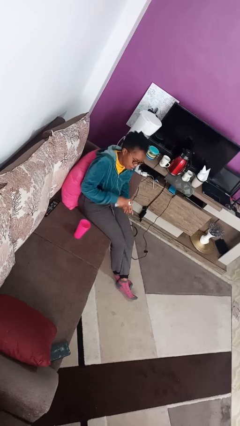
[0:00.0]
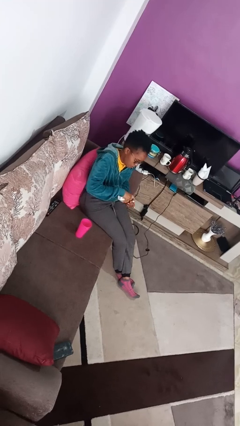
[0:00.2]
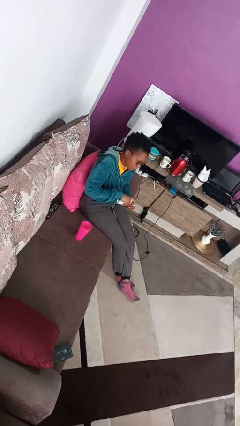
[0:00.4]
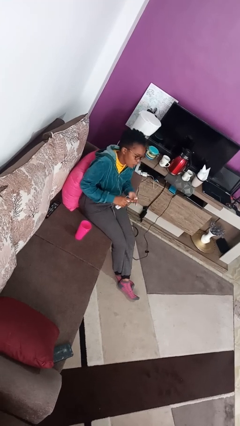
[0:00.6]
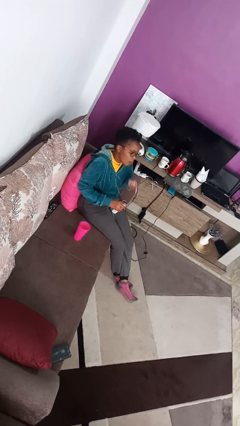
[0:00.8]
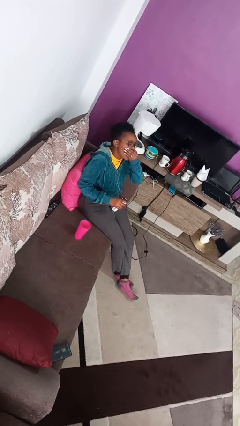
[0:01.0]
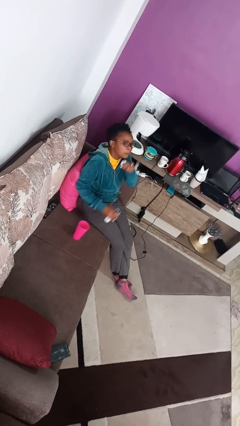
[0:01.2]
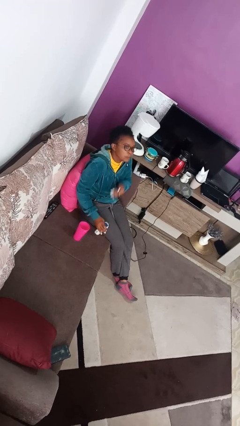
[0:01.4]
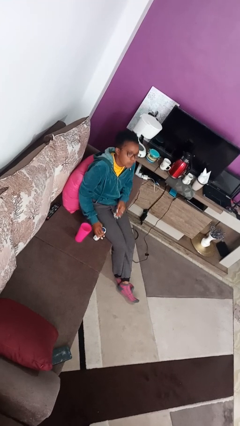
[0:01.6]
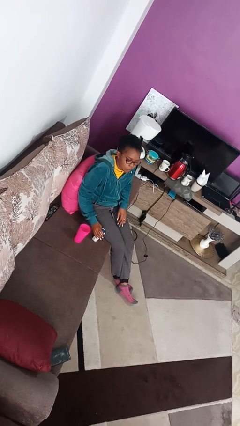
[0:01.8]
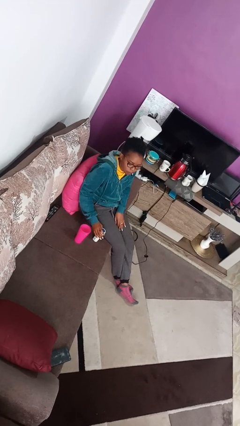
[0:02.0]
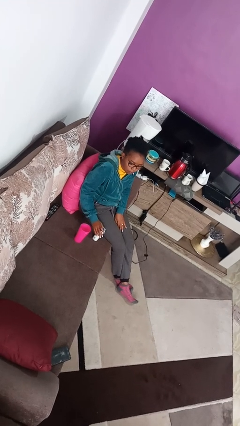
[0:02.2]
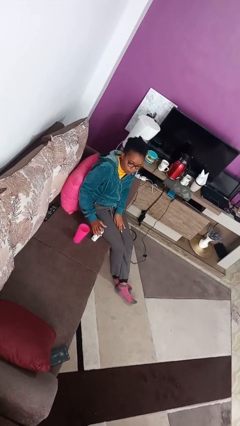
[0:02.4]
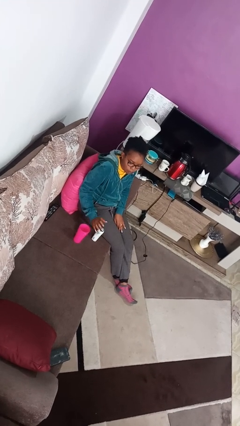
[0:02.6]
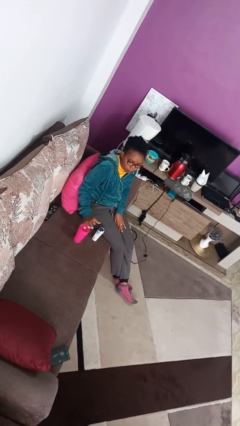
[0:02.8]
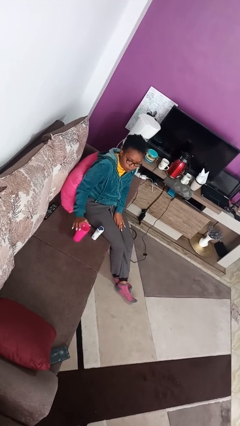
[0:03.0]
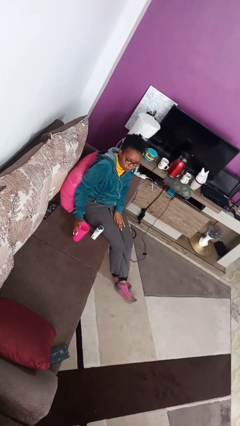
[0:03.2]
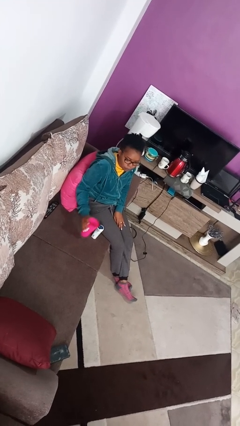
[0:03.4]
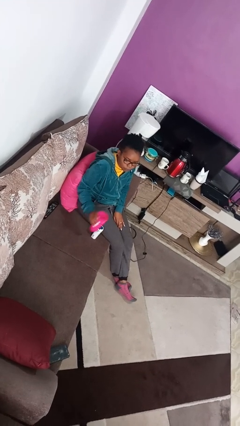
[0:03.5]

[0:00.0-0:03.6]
person takes medicine pills

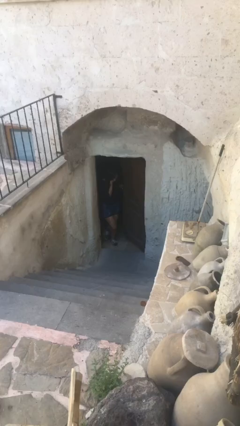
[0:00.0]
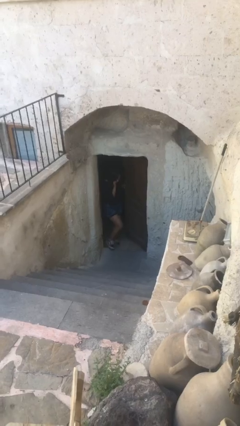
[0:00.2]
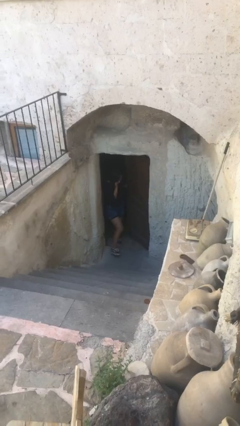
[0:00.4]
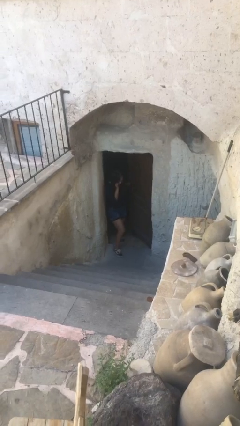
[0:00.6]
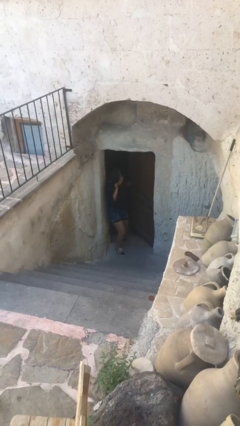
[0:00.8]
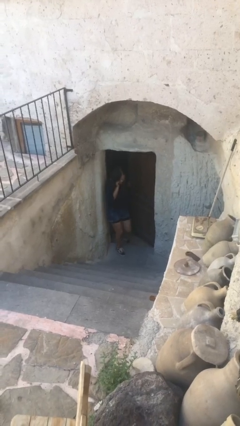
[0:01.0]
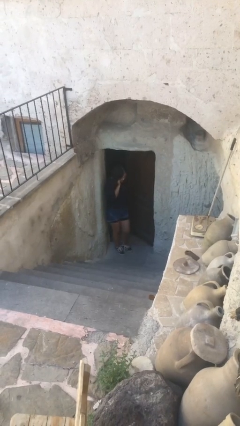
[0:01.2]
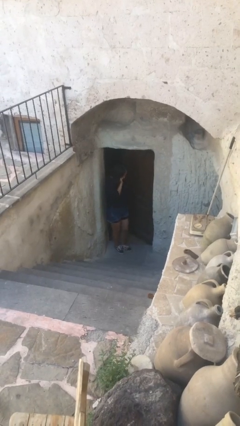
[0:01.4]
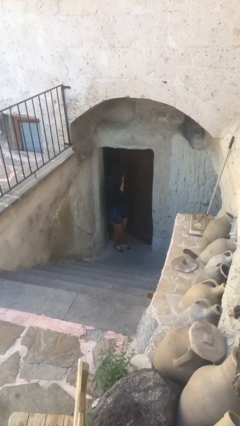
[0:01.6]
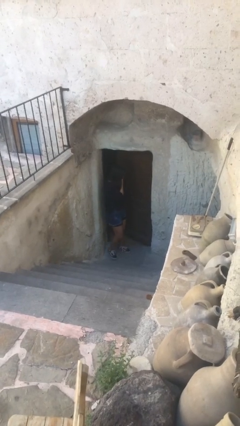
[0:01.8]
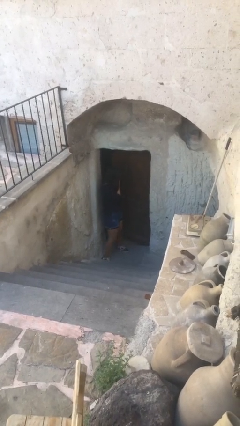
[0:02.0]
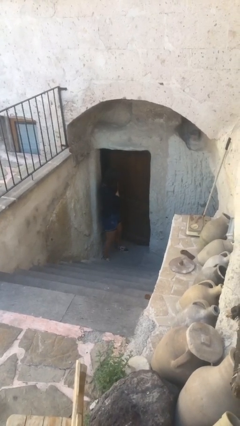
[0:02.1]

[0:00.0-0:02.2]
person enters scene through structure

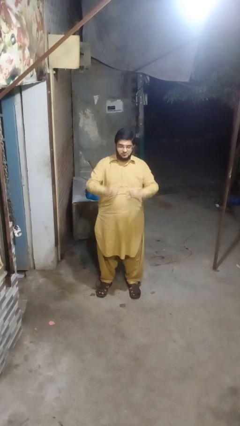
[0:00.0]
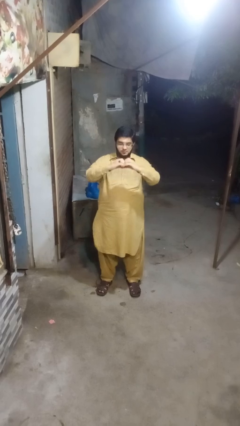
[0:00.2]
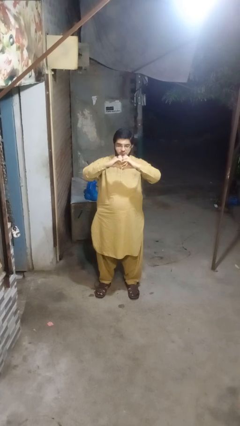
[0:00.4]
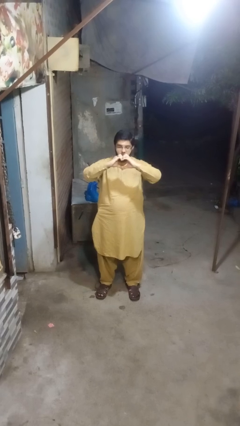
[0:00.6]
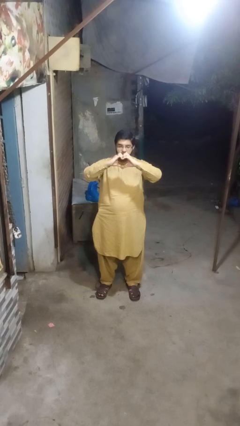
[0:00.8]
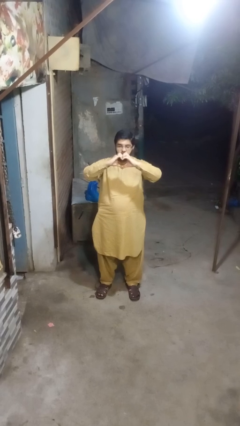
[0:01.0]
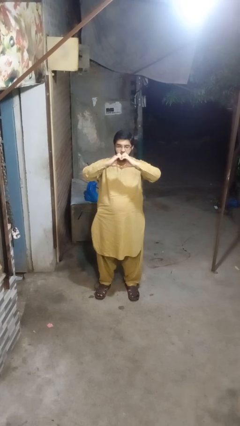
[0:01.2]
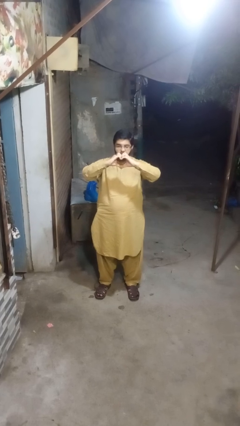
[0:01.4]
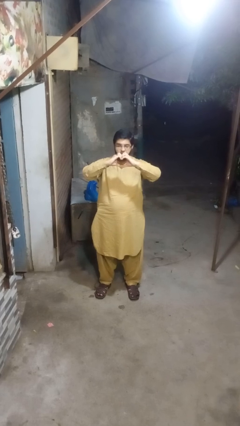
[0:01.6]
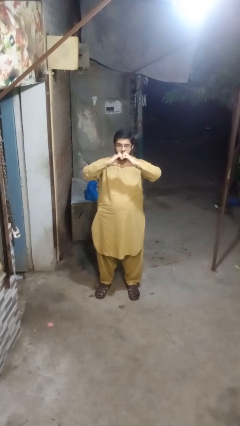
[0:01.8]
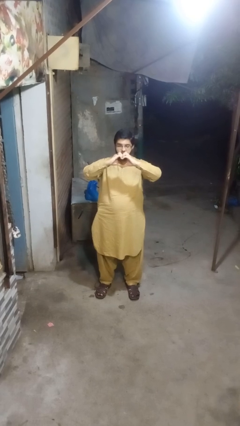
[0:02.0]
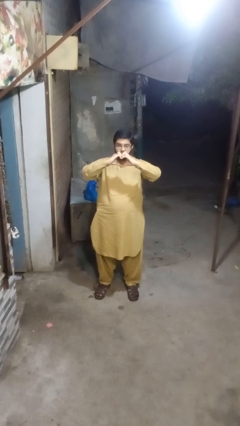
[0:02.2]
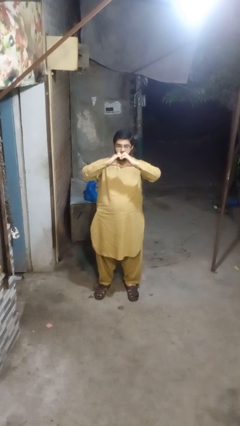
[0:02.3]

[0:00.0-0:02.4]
person gestures heart

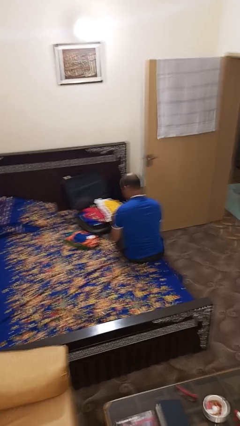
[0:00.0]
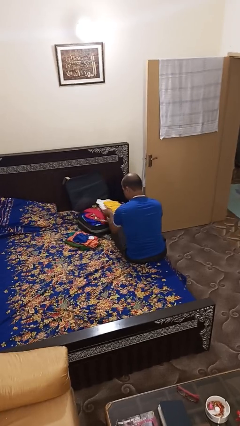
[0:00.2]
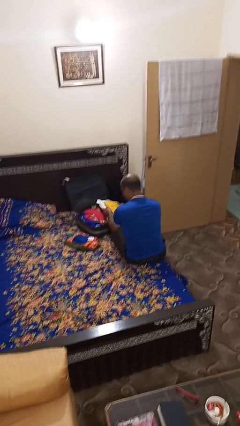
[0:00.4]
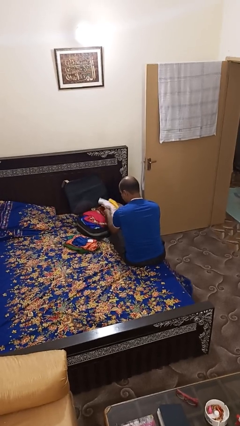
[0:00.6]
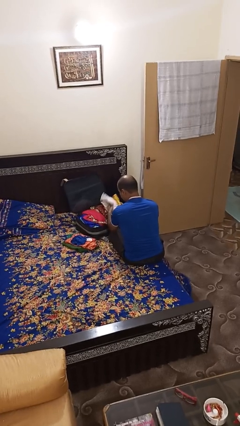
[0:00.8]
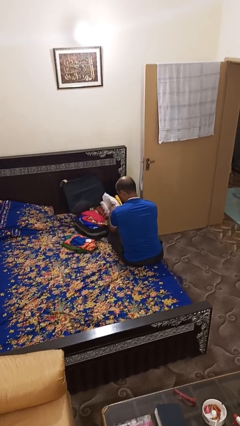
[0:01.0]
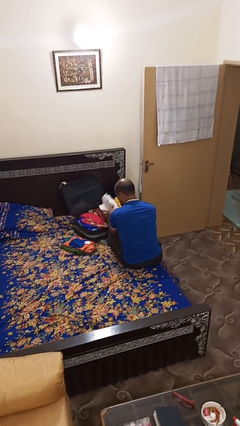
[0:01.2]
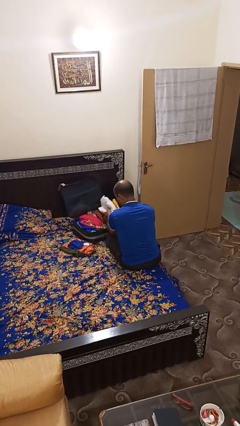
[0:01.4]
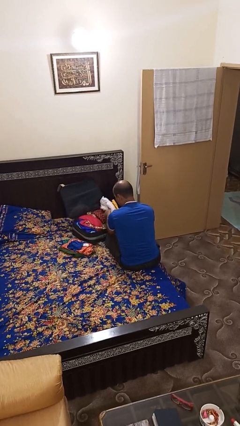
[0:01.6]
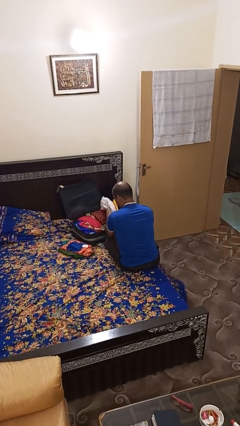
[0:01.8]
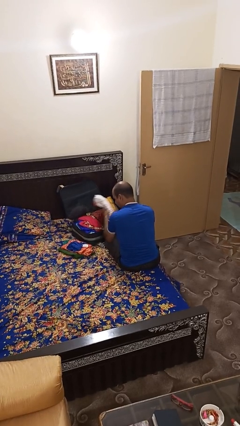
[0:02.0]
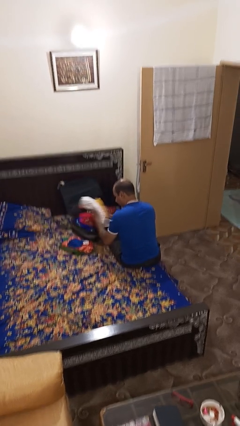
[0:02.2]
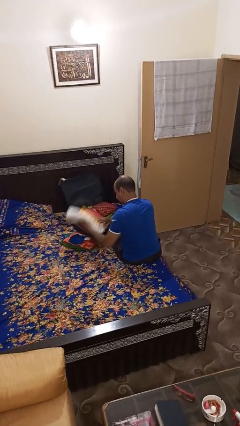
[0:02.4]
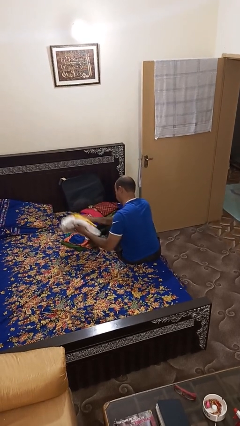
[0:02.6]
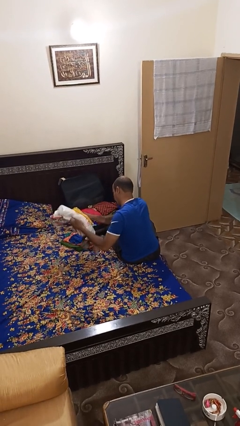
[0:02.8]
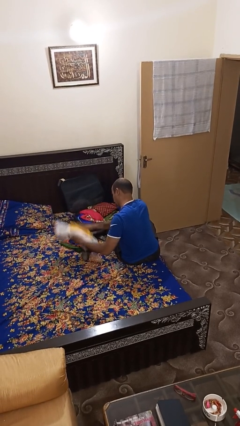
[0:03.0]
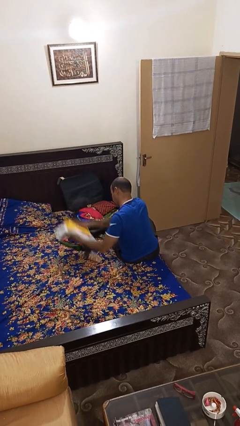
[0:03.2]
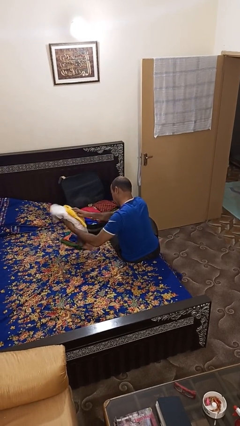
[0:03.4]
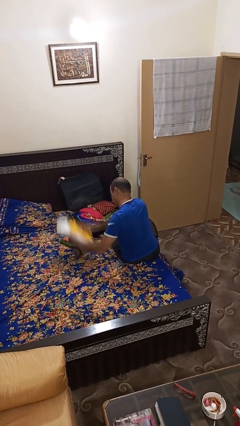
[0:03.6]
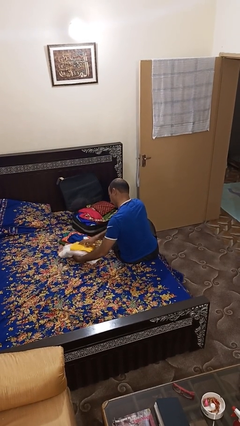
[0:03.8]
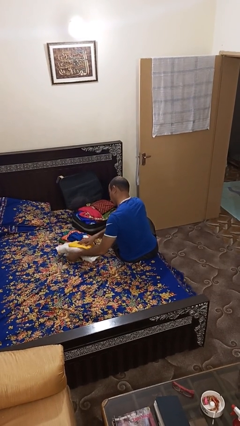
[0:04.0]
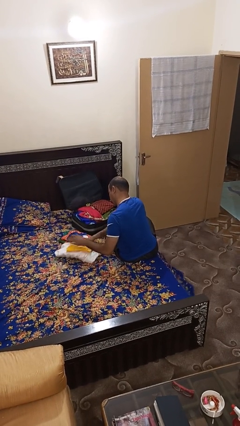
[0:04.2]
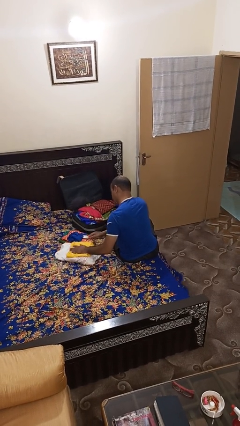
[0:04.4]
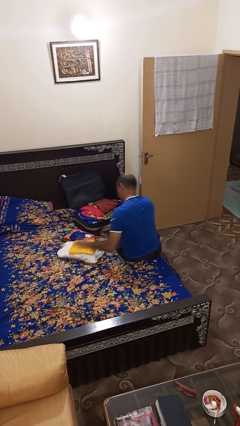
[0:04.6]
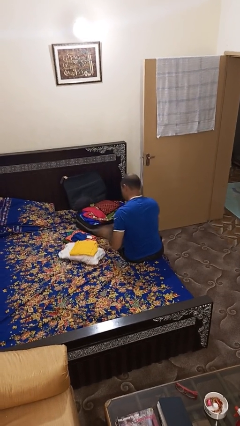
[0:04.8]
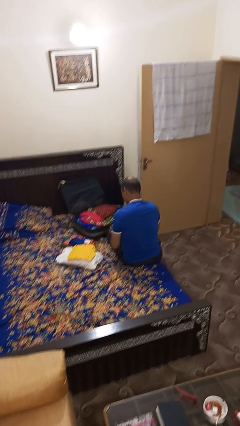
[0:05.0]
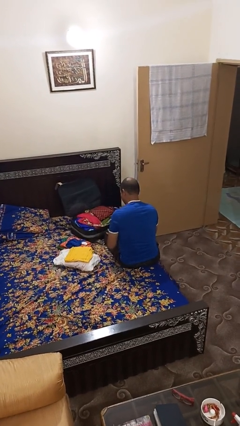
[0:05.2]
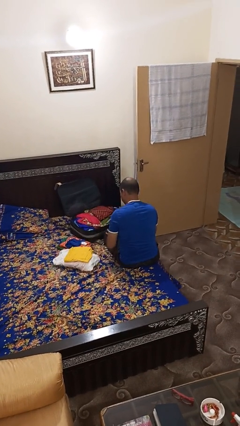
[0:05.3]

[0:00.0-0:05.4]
person unloads clothes from suitcase

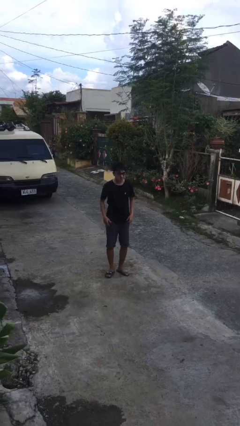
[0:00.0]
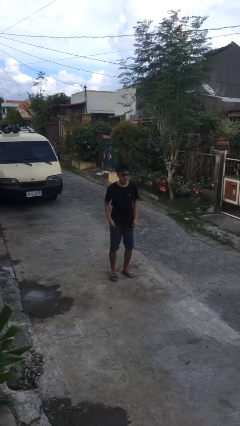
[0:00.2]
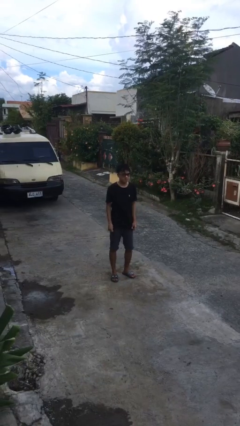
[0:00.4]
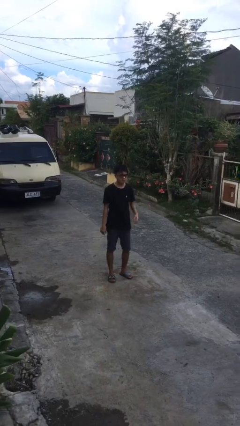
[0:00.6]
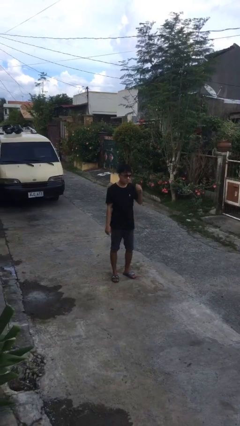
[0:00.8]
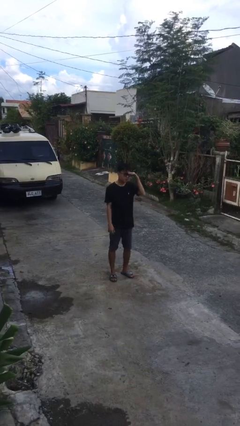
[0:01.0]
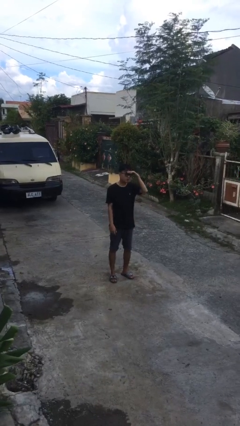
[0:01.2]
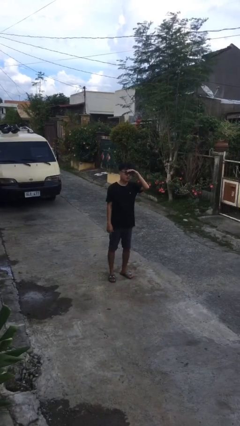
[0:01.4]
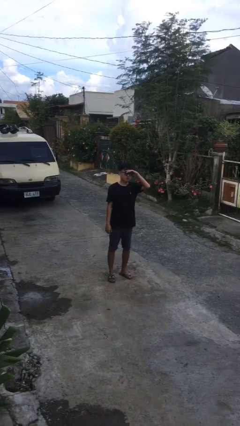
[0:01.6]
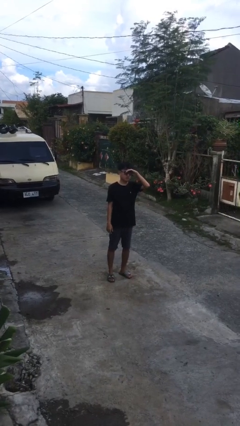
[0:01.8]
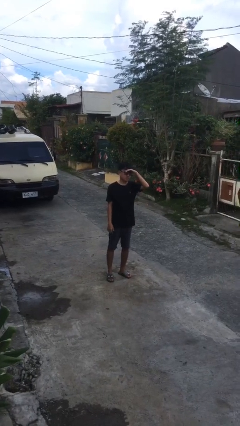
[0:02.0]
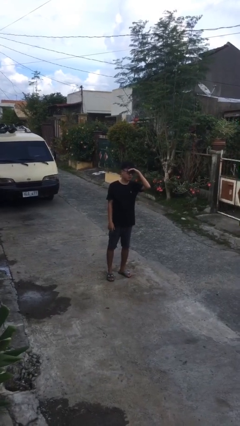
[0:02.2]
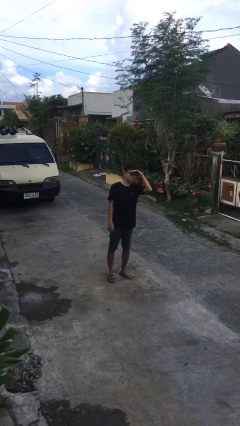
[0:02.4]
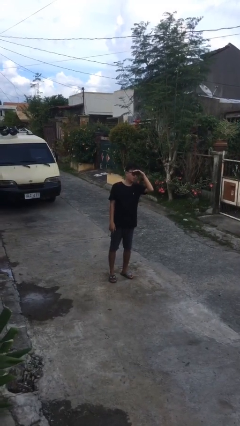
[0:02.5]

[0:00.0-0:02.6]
person shades eyes

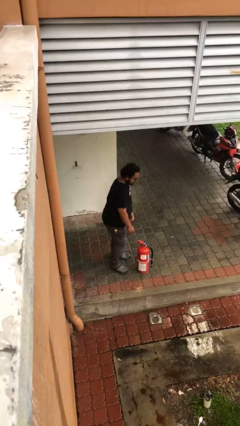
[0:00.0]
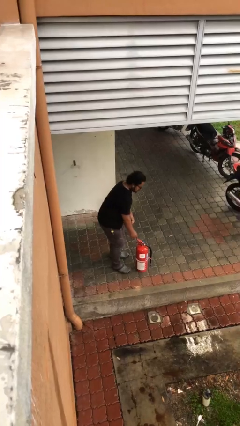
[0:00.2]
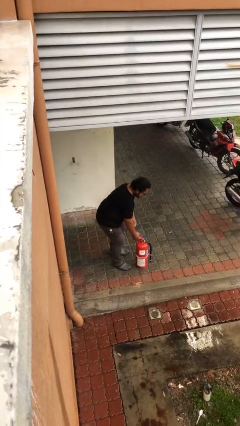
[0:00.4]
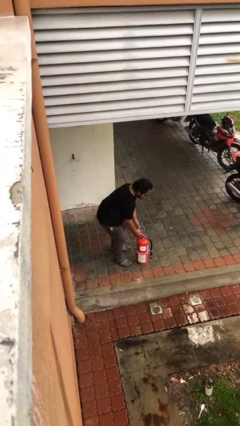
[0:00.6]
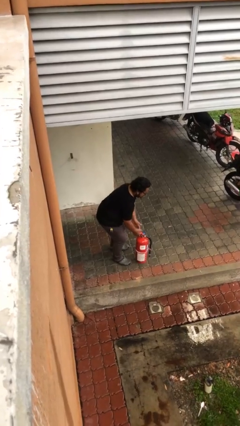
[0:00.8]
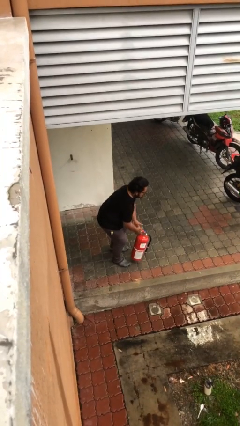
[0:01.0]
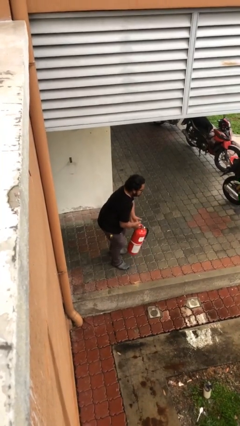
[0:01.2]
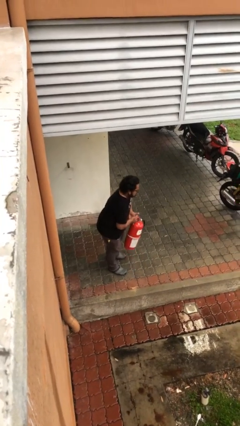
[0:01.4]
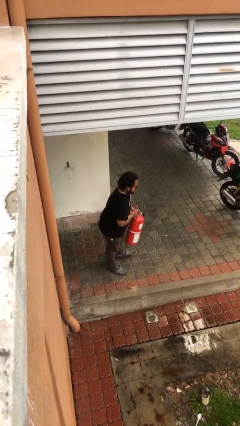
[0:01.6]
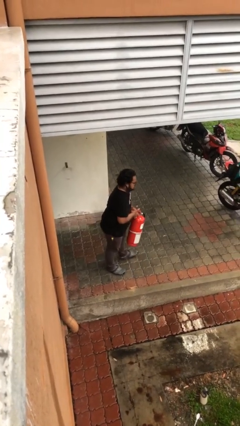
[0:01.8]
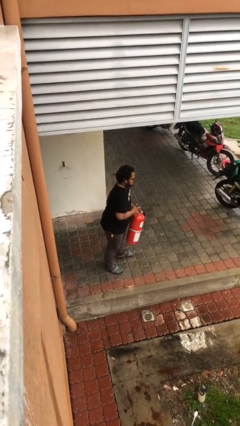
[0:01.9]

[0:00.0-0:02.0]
person picks up object from floor
